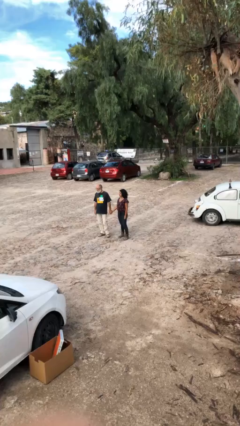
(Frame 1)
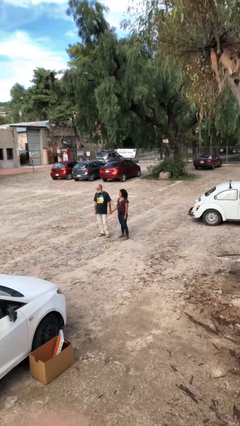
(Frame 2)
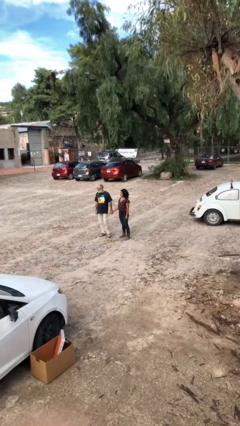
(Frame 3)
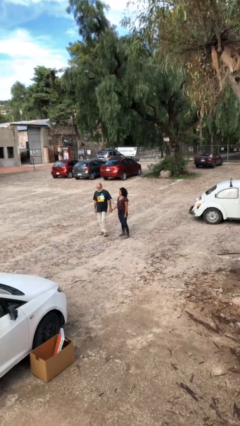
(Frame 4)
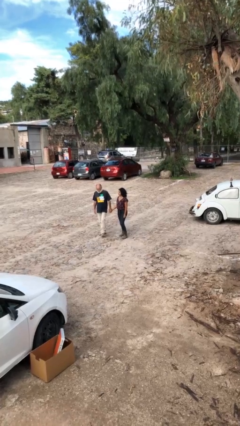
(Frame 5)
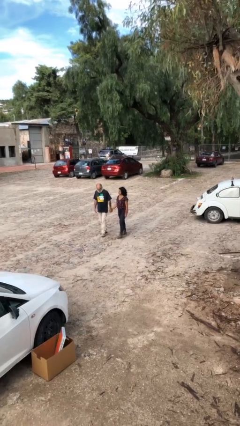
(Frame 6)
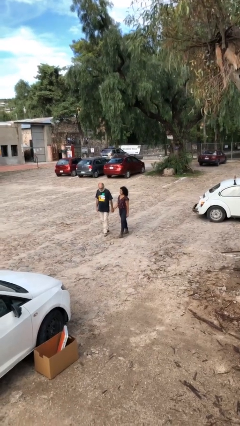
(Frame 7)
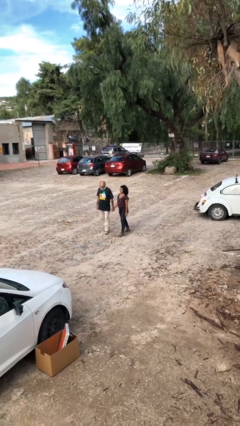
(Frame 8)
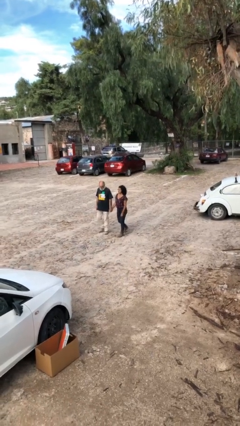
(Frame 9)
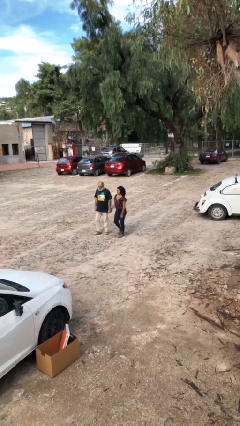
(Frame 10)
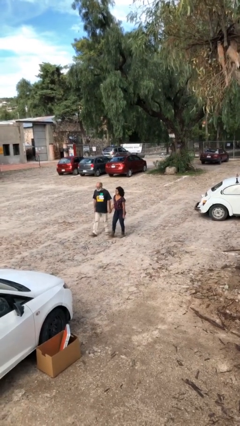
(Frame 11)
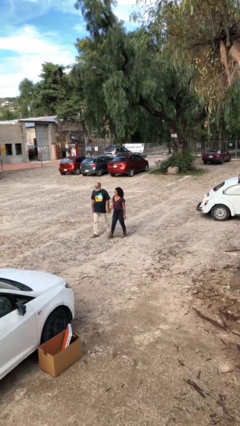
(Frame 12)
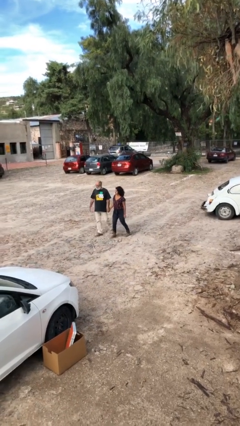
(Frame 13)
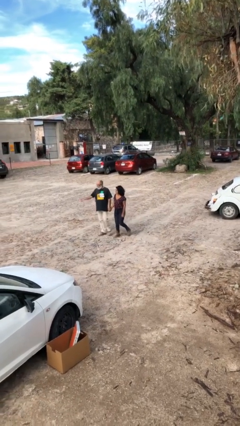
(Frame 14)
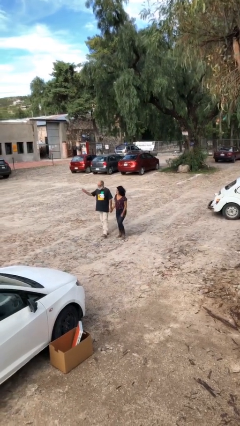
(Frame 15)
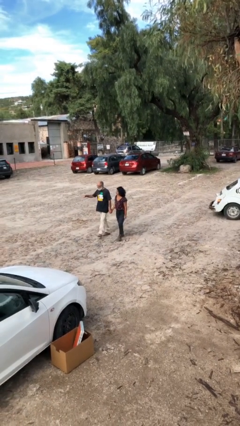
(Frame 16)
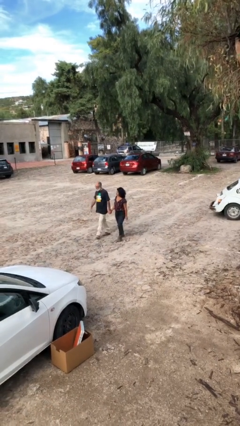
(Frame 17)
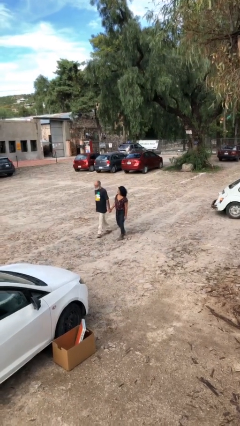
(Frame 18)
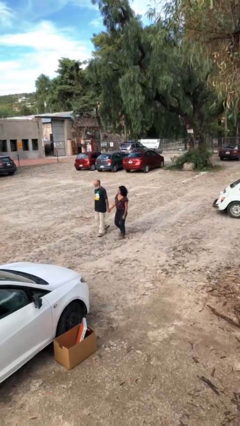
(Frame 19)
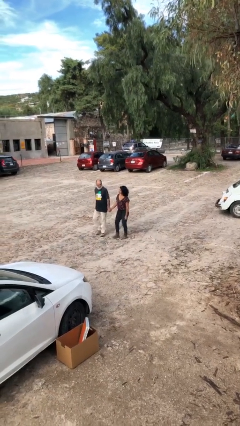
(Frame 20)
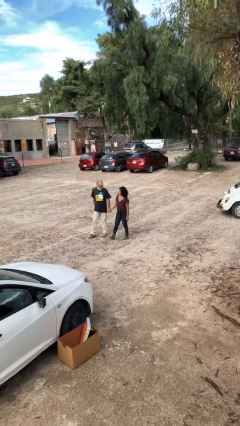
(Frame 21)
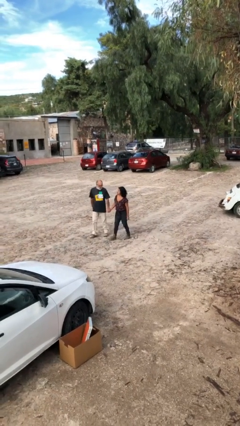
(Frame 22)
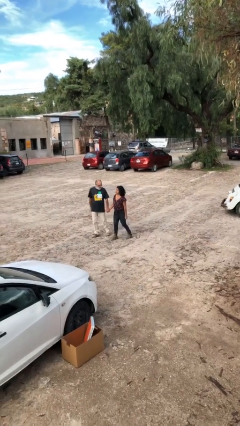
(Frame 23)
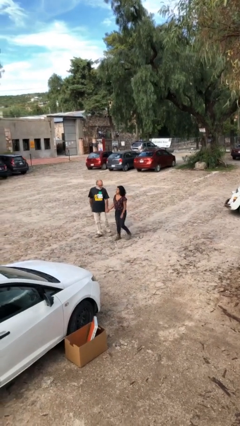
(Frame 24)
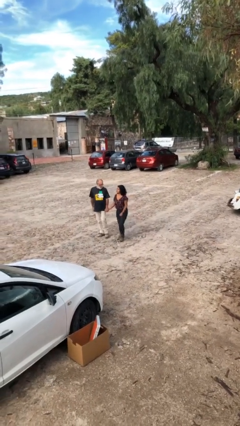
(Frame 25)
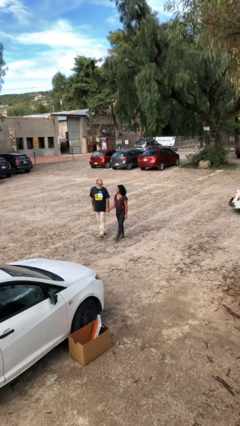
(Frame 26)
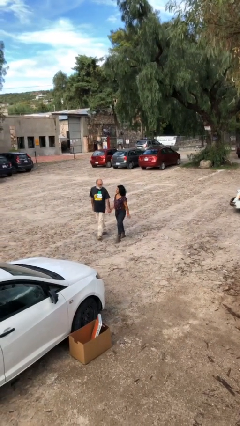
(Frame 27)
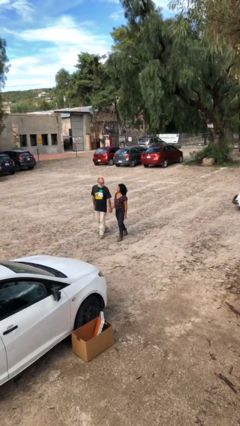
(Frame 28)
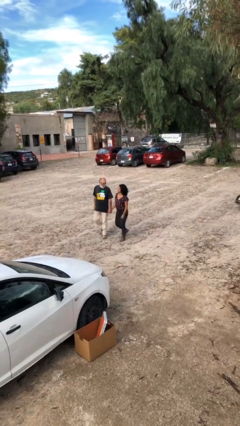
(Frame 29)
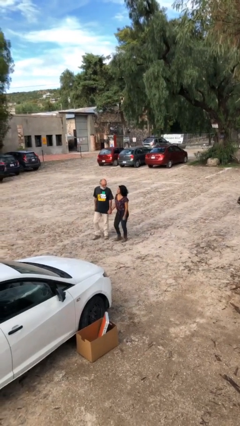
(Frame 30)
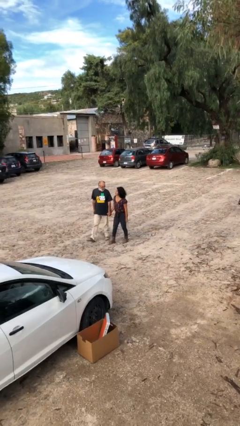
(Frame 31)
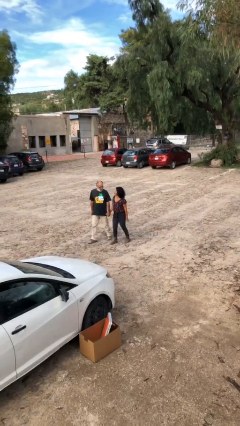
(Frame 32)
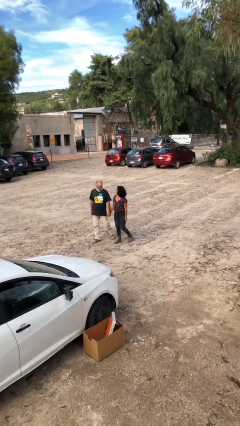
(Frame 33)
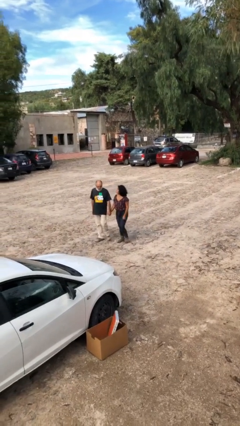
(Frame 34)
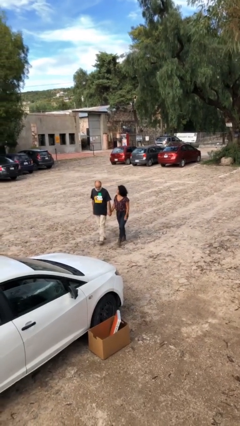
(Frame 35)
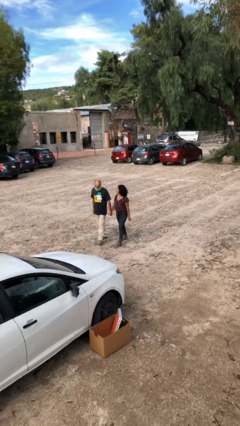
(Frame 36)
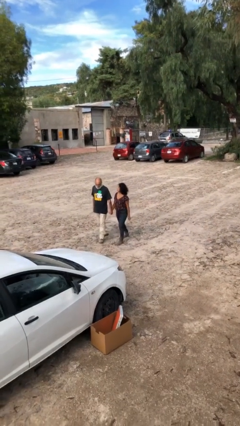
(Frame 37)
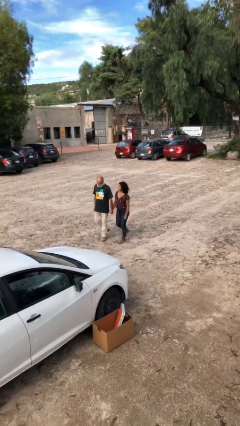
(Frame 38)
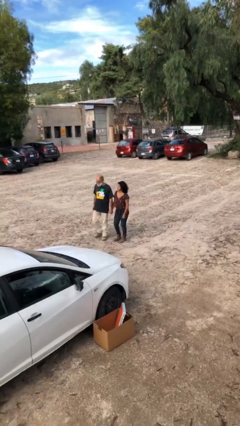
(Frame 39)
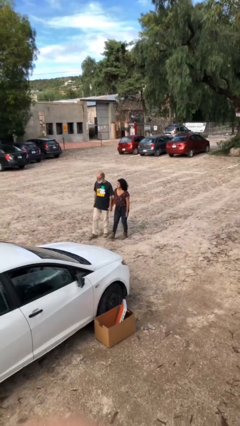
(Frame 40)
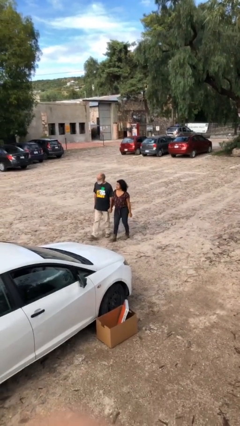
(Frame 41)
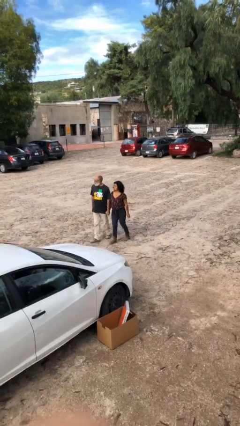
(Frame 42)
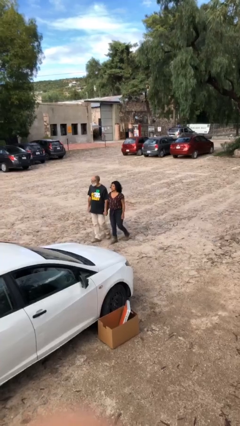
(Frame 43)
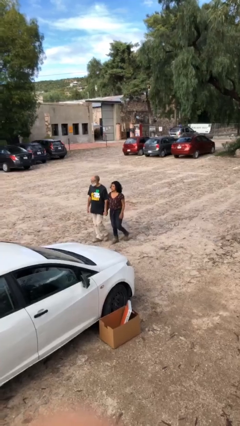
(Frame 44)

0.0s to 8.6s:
person holds hand

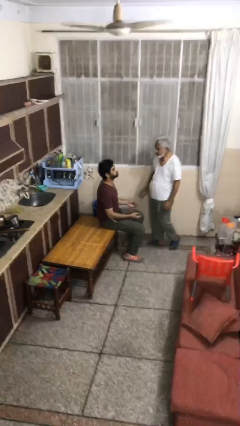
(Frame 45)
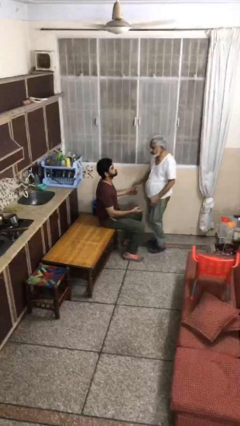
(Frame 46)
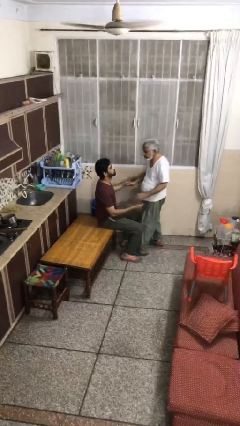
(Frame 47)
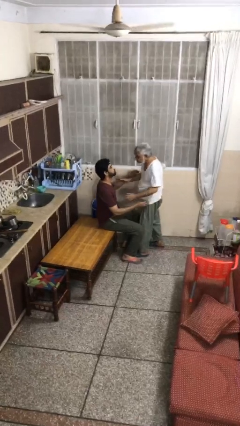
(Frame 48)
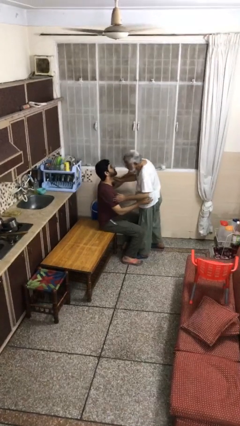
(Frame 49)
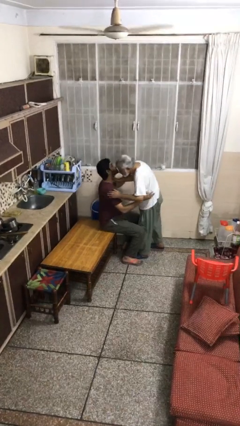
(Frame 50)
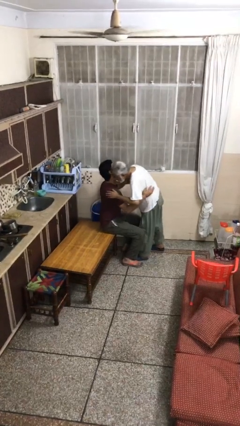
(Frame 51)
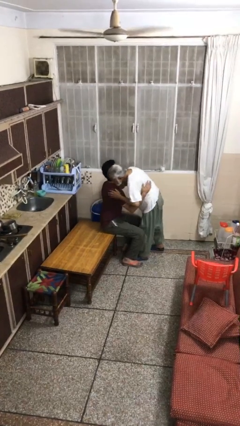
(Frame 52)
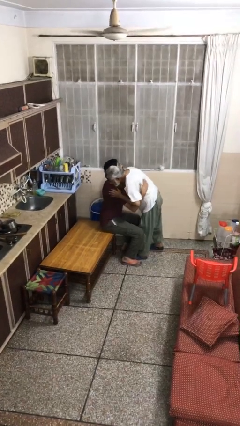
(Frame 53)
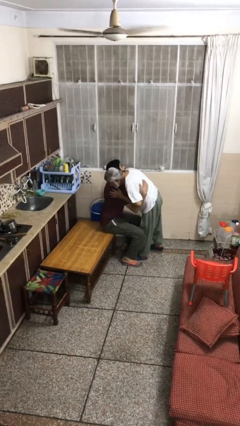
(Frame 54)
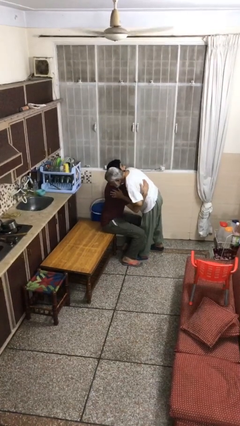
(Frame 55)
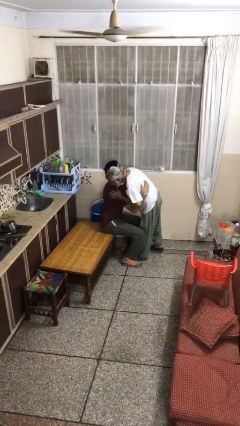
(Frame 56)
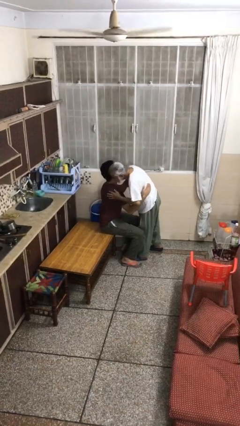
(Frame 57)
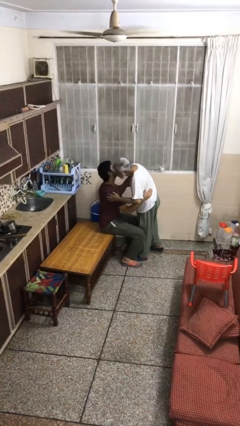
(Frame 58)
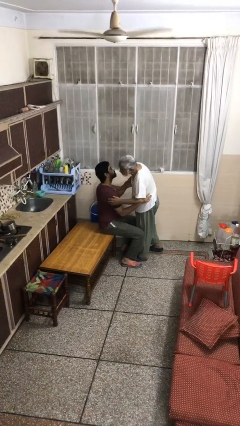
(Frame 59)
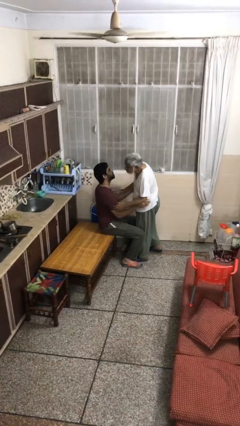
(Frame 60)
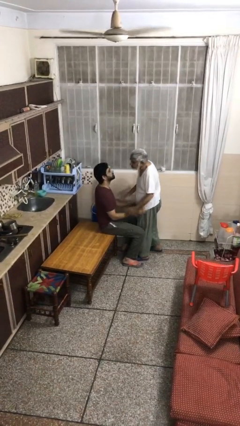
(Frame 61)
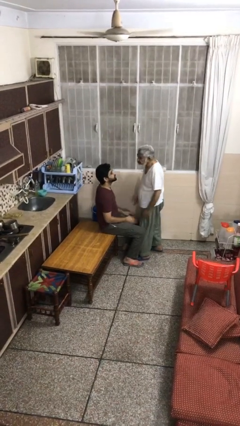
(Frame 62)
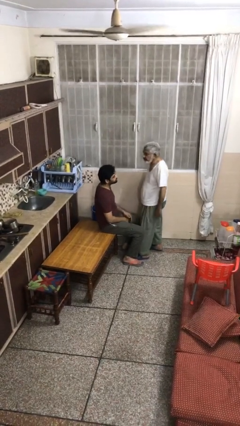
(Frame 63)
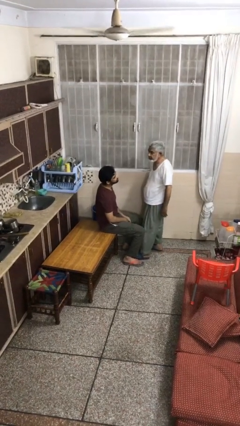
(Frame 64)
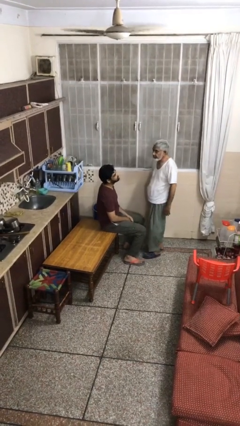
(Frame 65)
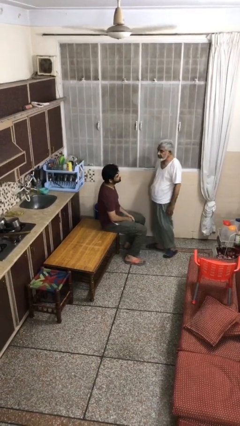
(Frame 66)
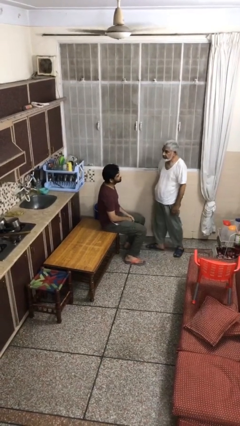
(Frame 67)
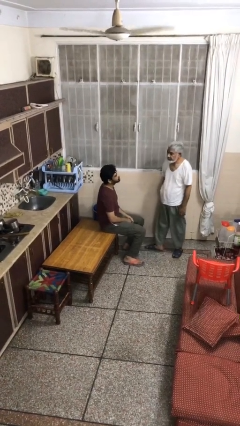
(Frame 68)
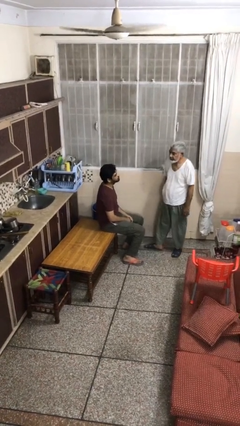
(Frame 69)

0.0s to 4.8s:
person embraces person

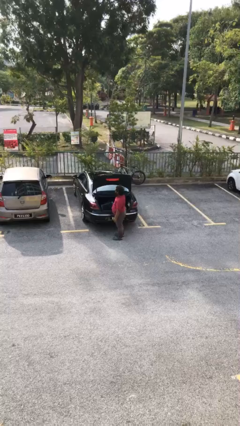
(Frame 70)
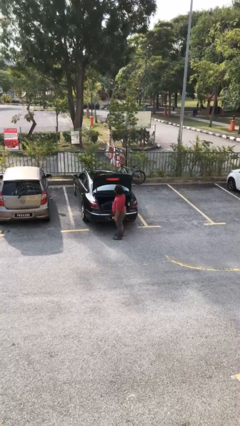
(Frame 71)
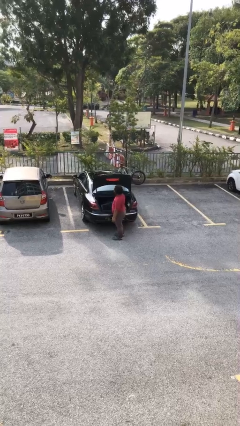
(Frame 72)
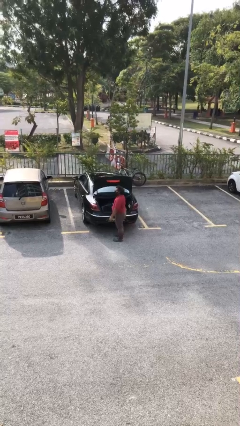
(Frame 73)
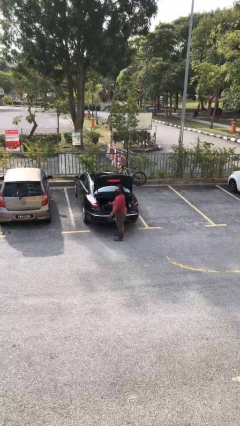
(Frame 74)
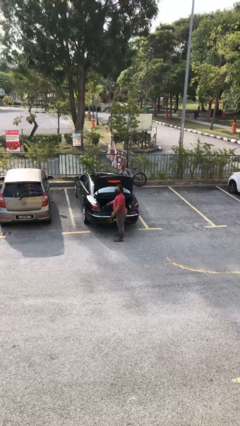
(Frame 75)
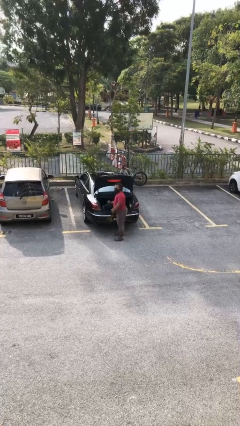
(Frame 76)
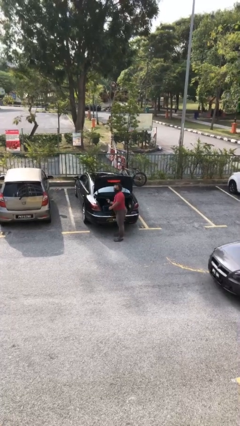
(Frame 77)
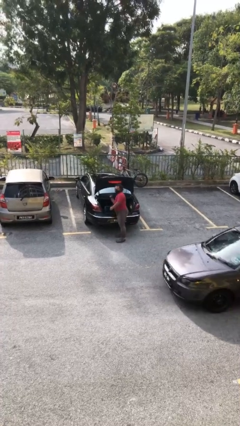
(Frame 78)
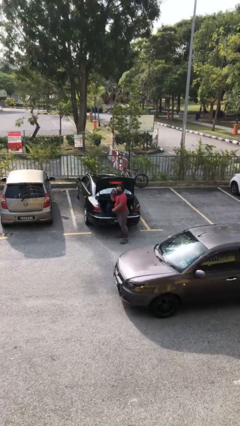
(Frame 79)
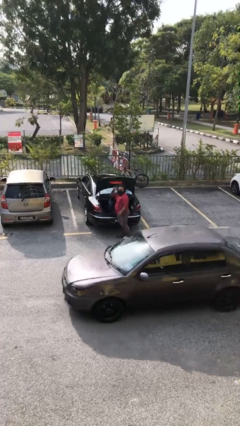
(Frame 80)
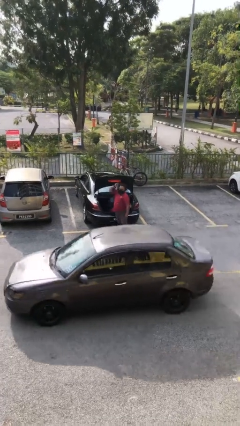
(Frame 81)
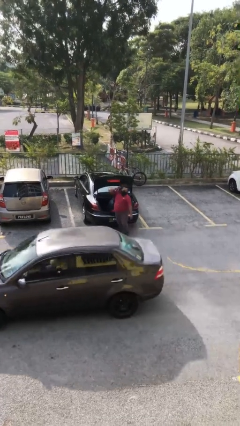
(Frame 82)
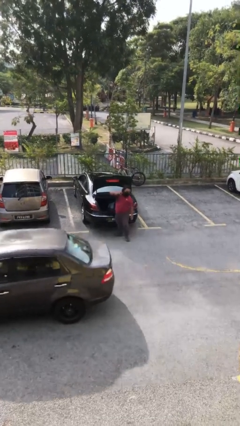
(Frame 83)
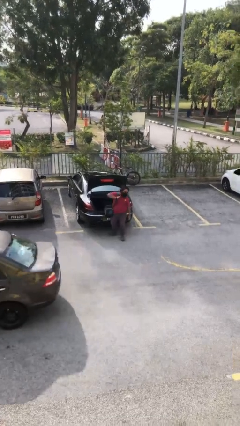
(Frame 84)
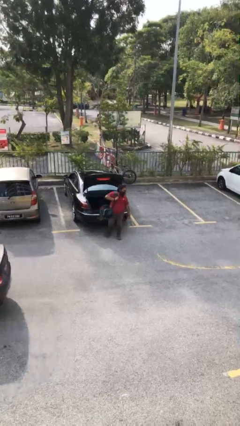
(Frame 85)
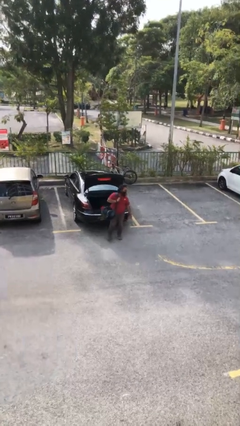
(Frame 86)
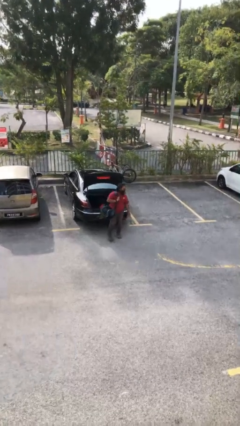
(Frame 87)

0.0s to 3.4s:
person unloads car

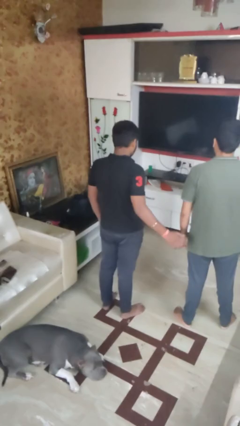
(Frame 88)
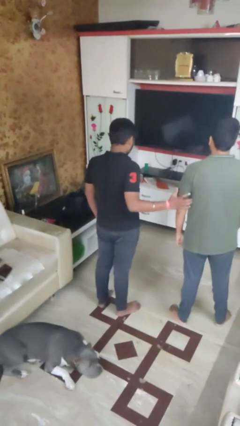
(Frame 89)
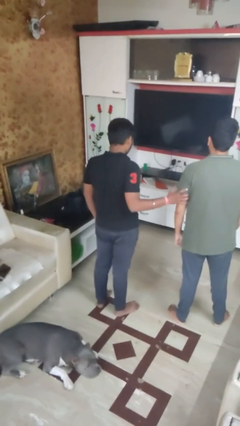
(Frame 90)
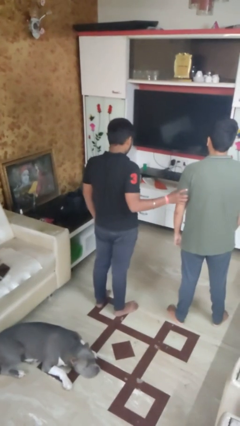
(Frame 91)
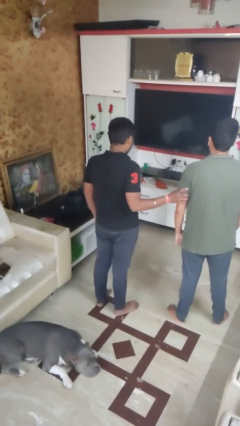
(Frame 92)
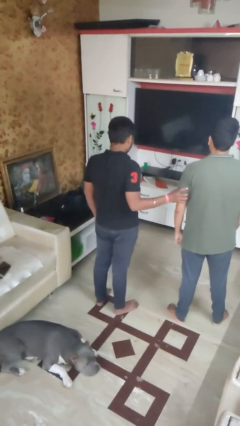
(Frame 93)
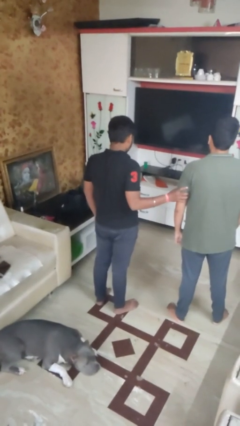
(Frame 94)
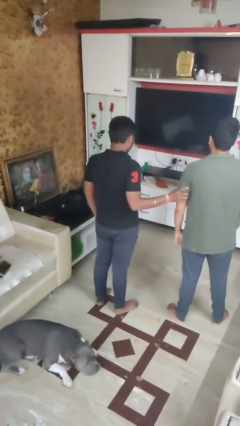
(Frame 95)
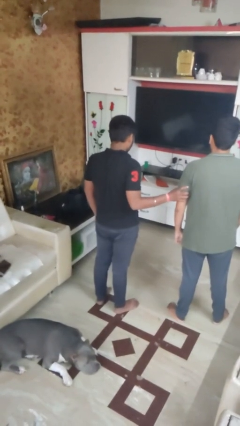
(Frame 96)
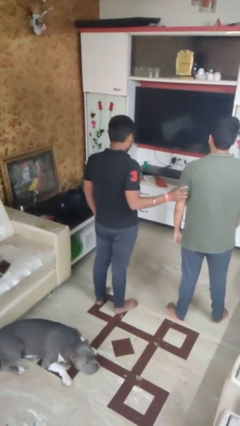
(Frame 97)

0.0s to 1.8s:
person grabs person by bicep
